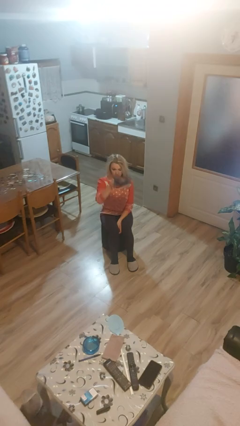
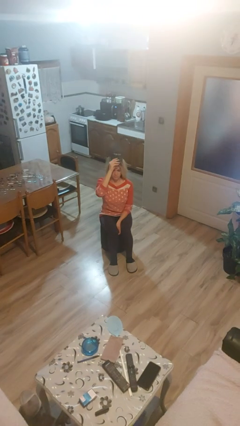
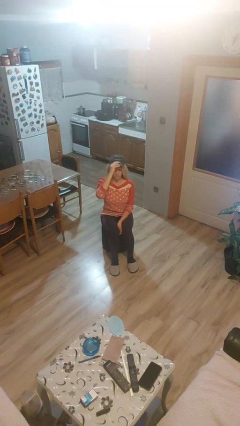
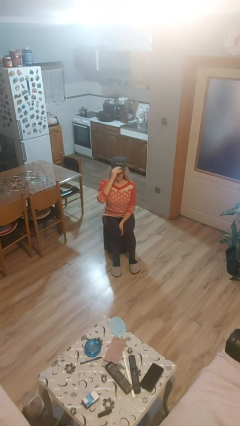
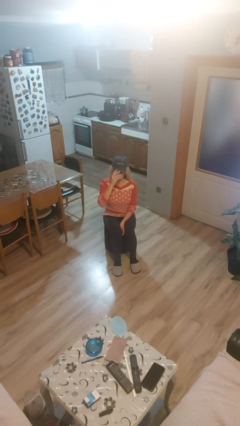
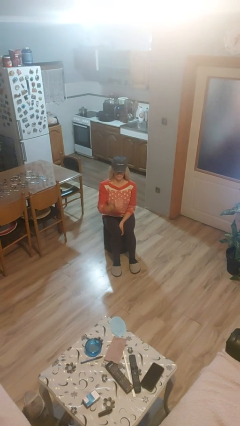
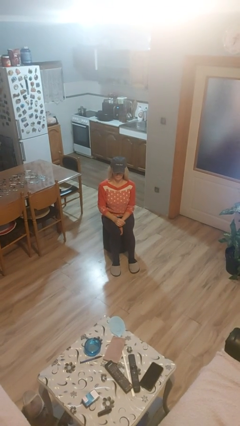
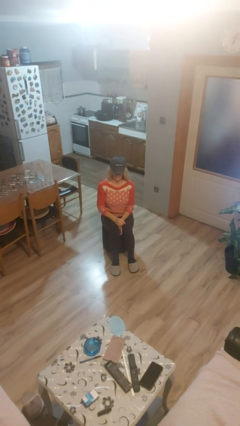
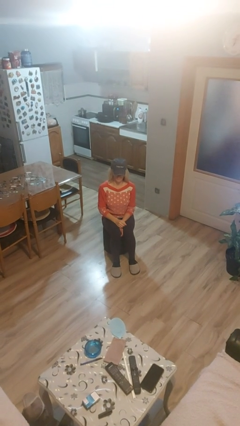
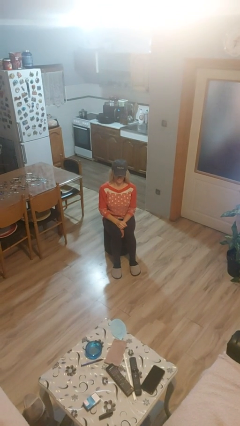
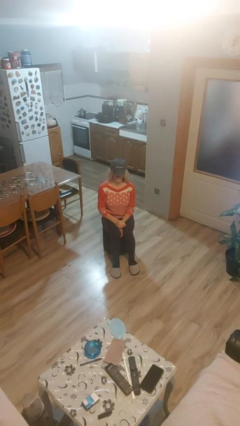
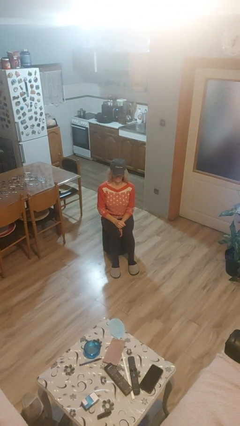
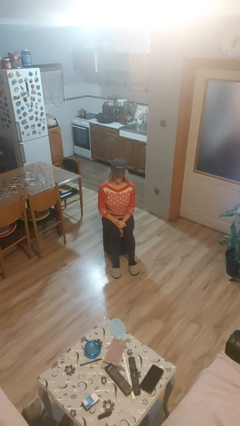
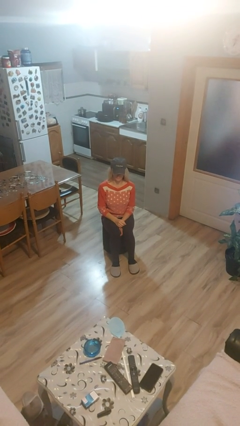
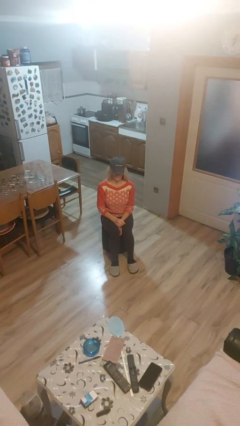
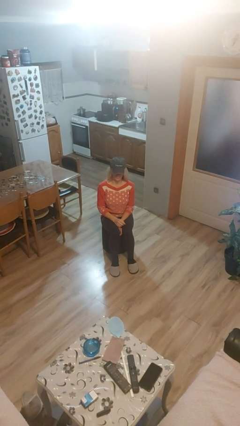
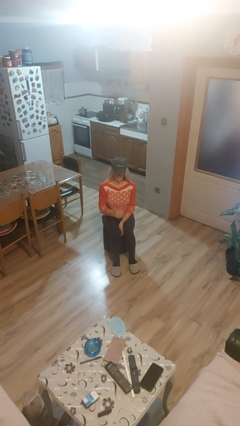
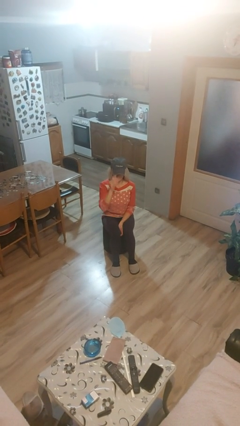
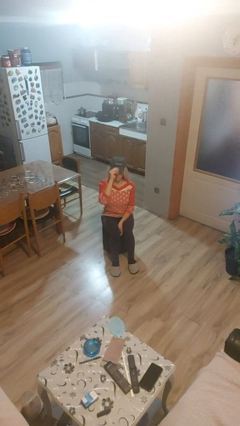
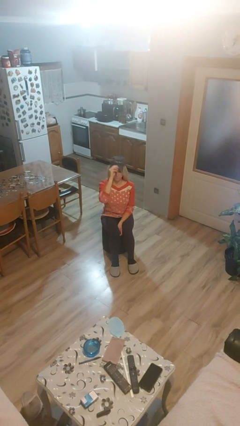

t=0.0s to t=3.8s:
person puts on hat

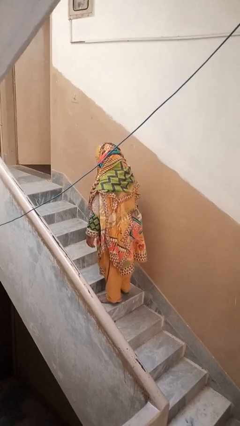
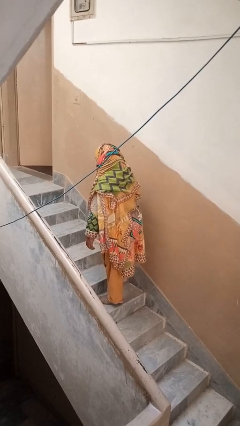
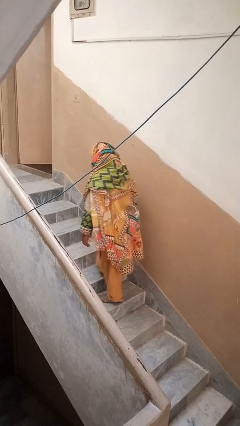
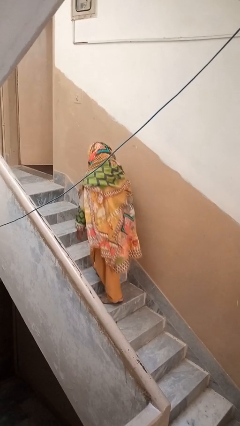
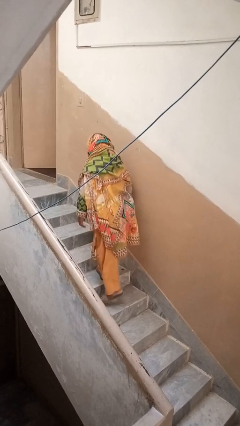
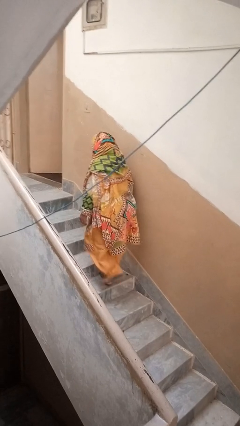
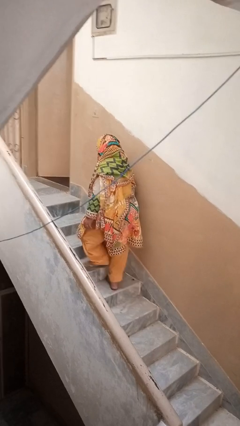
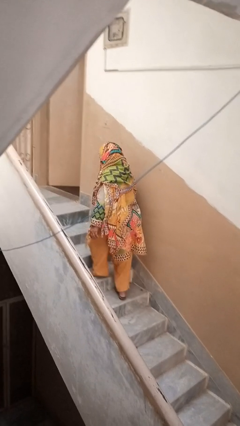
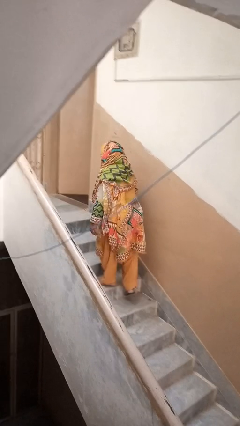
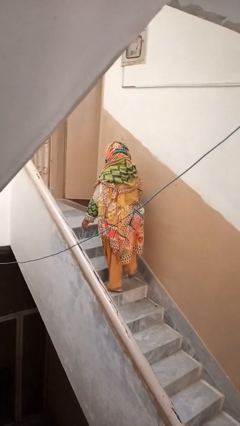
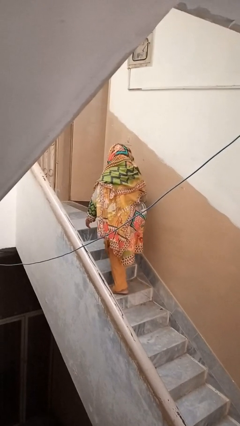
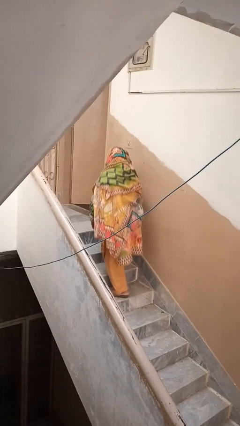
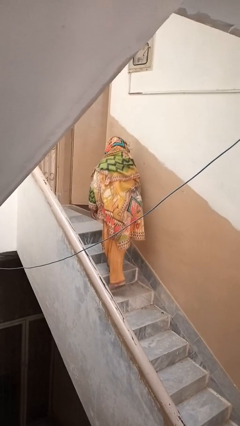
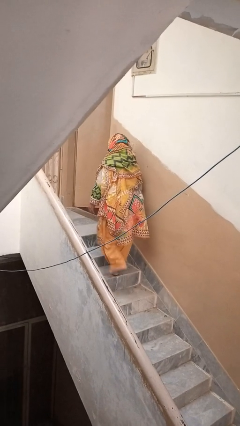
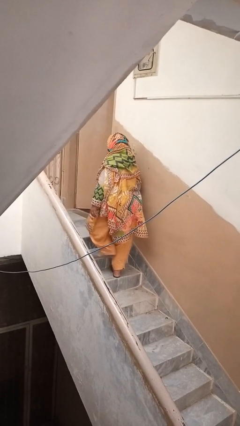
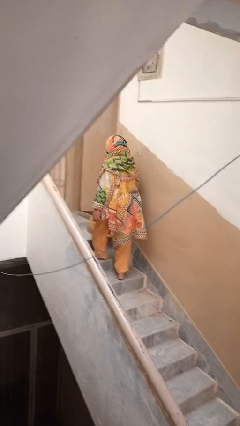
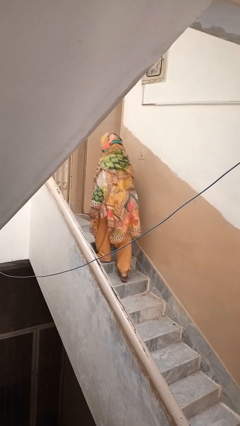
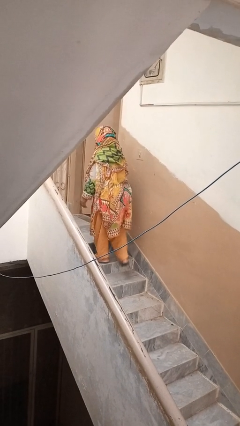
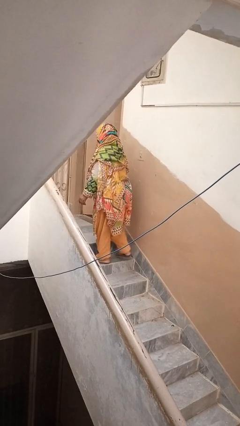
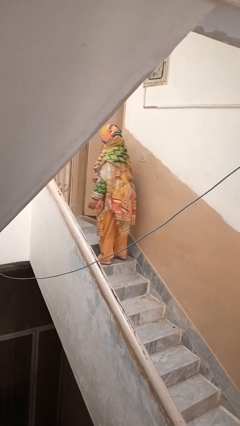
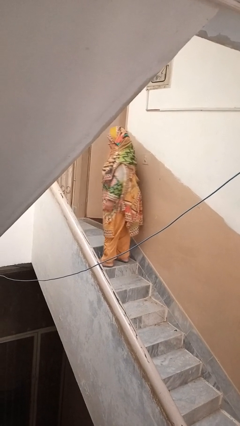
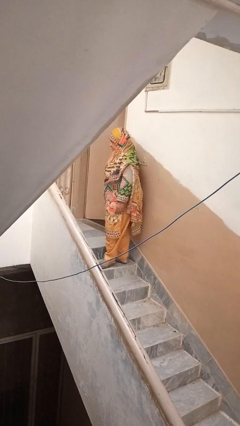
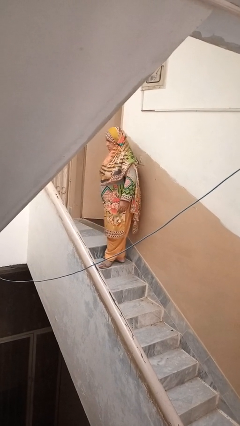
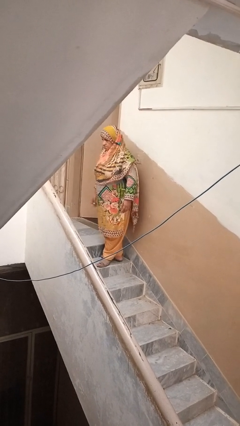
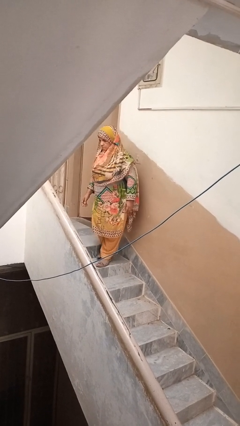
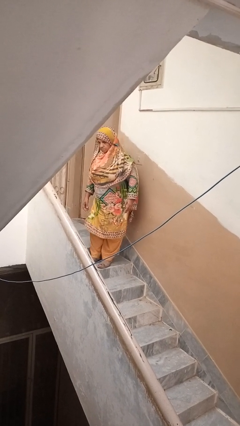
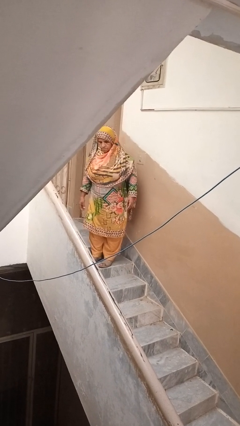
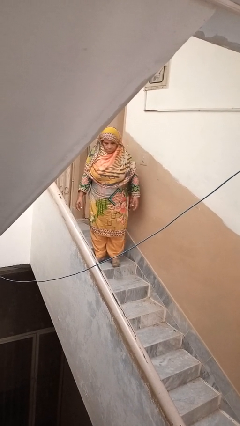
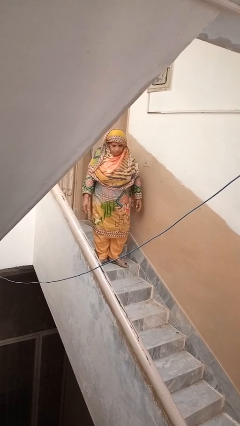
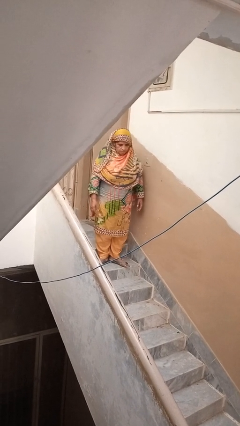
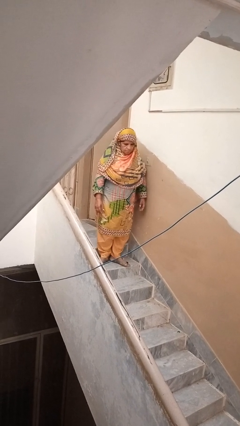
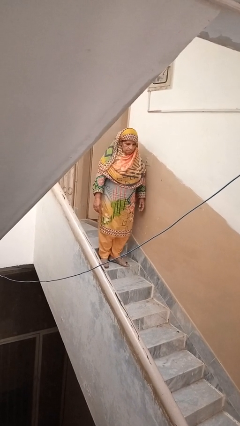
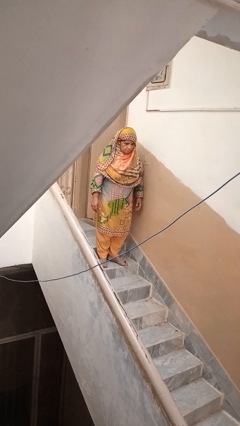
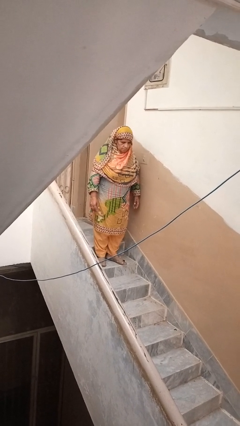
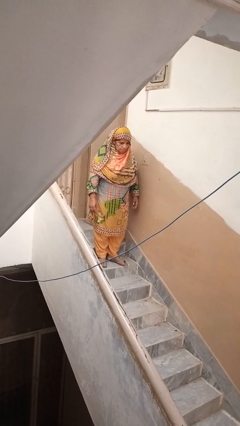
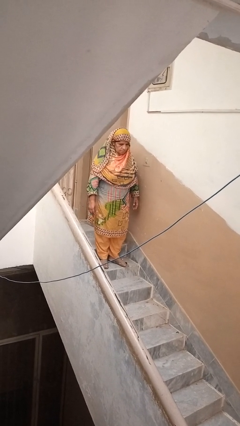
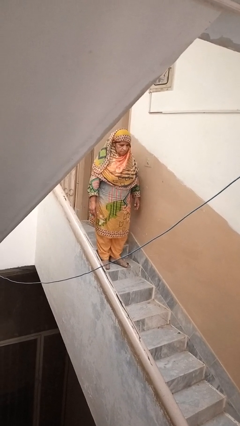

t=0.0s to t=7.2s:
person climbs up stairs

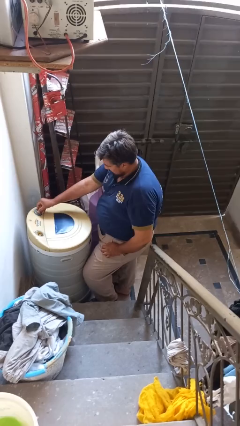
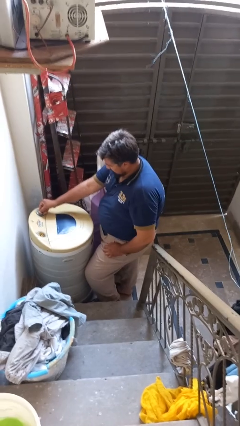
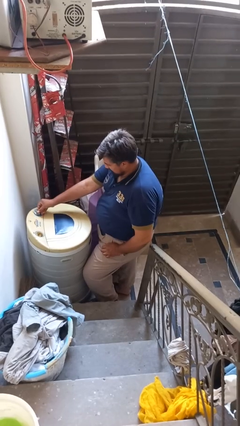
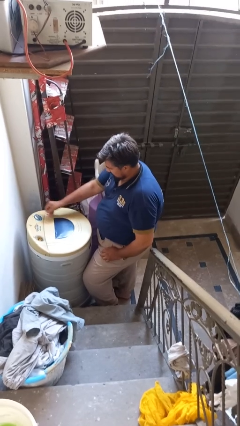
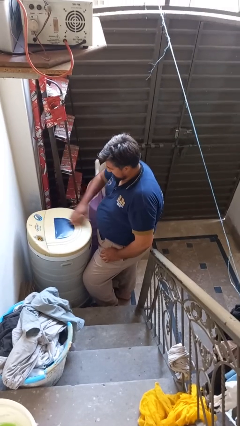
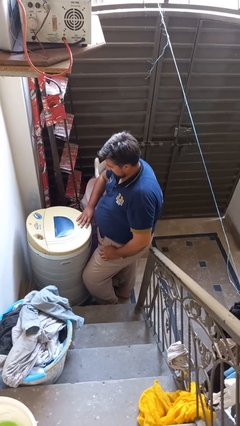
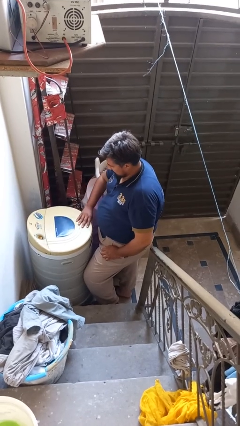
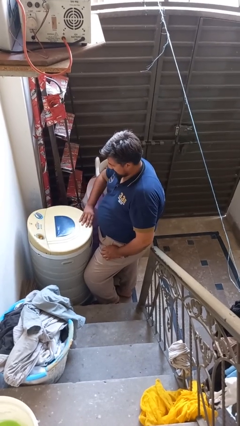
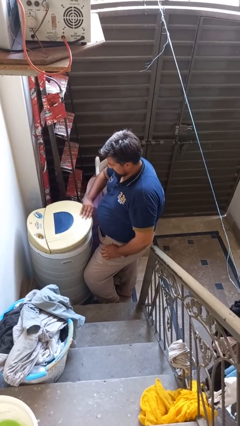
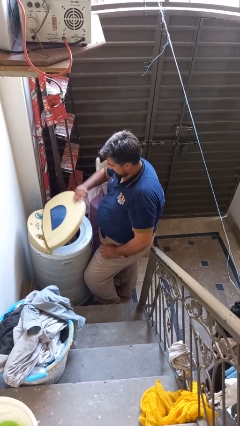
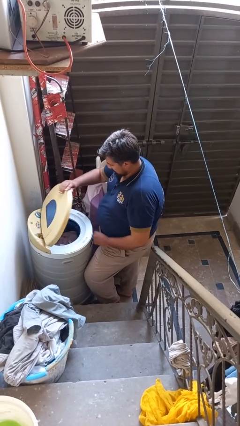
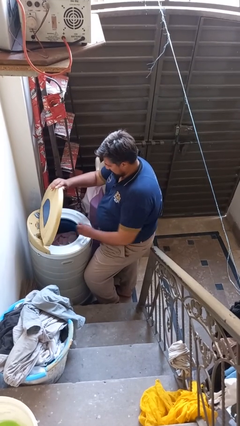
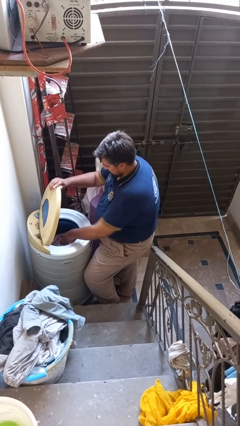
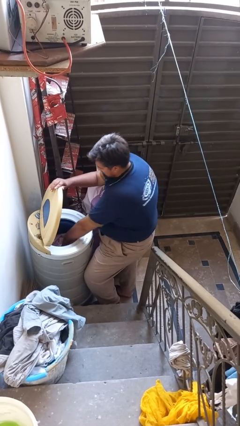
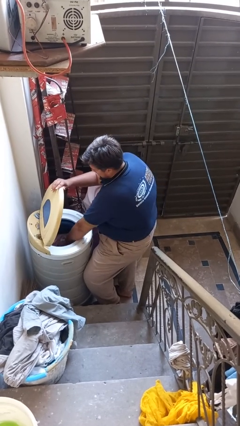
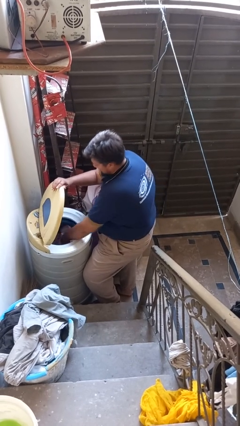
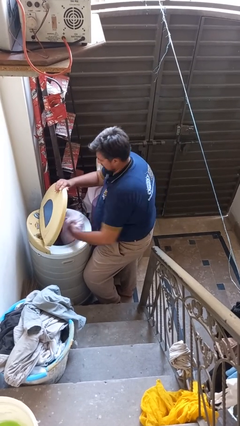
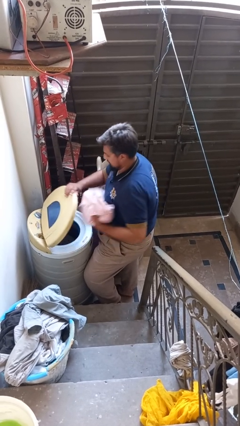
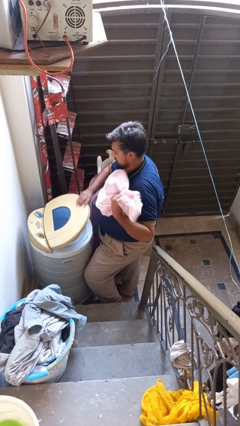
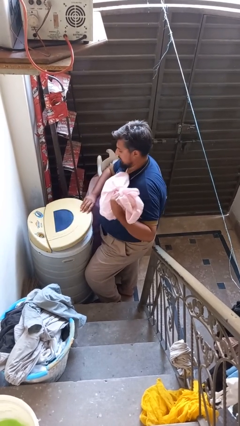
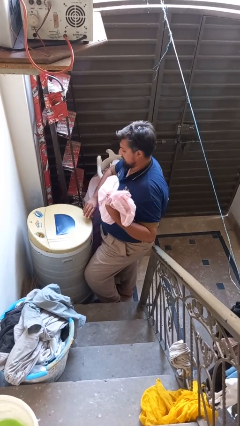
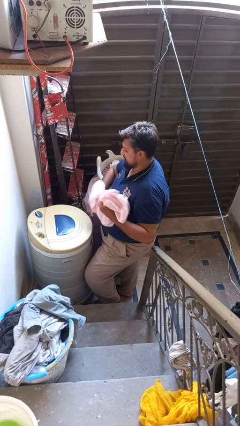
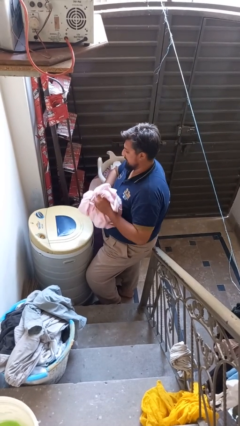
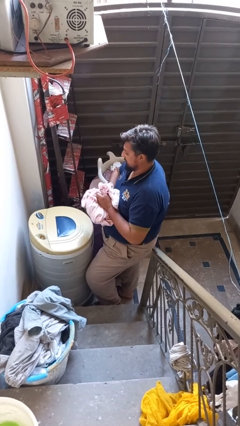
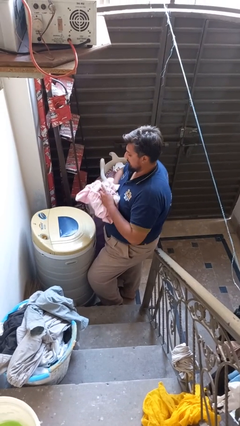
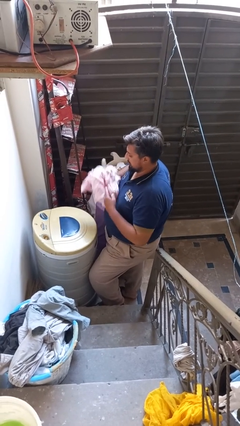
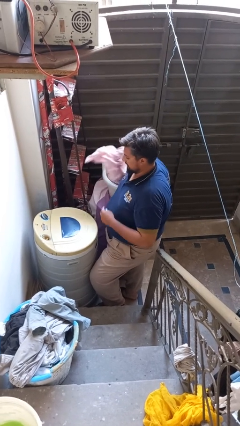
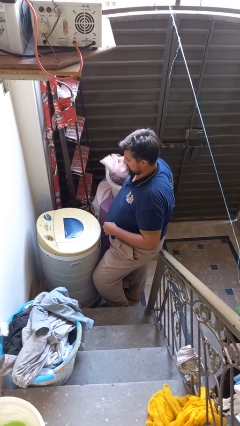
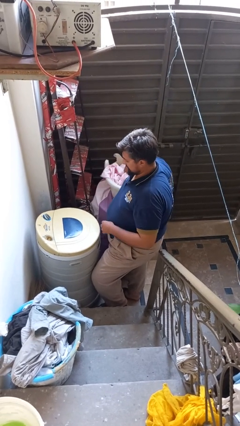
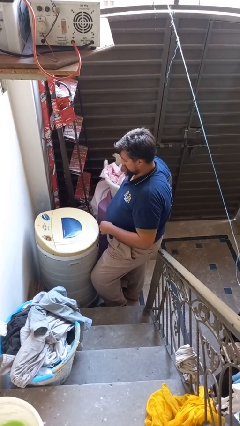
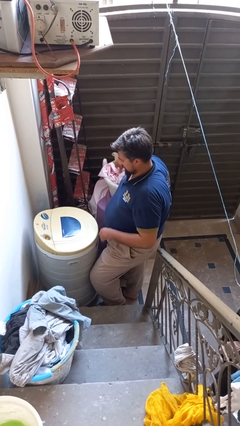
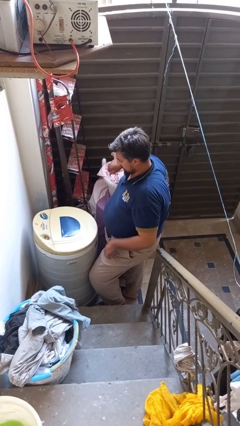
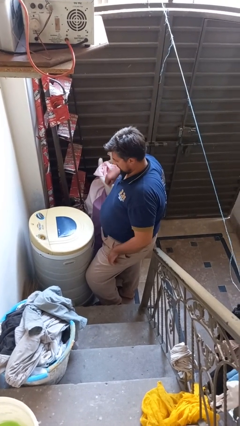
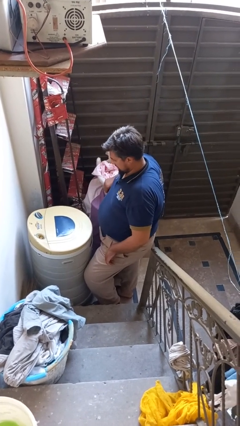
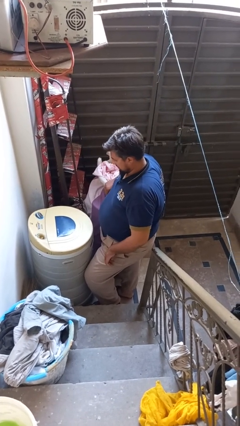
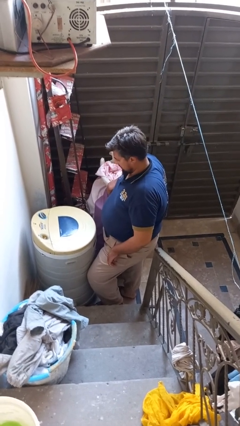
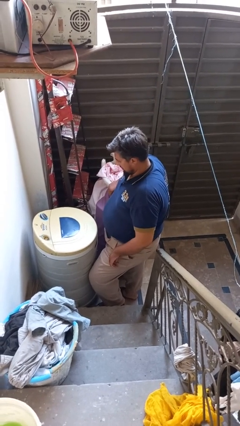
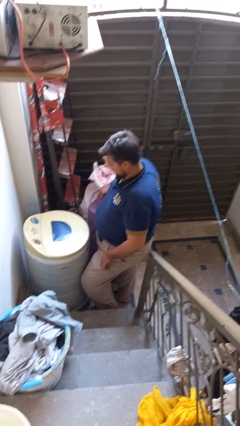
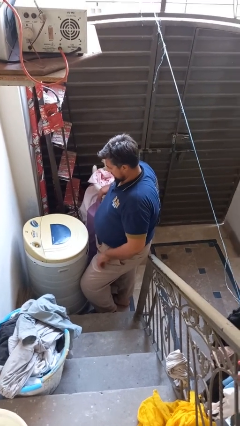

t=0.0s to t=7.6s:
person unloads dryer
